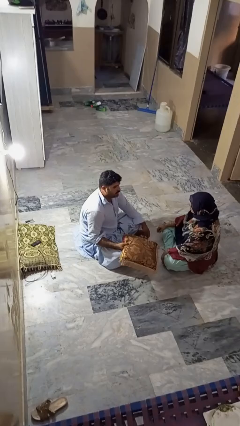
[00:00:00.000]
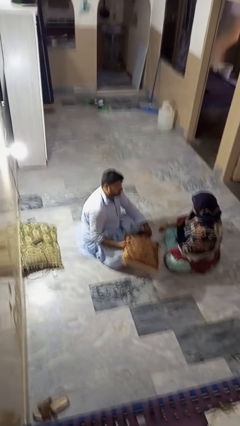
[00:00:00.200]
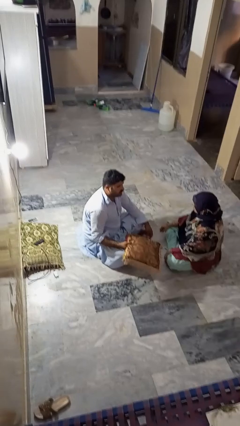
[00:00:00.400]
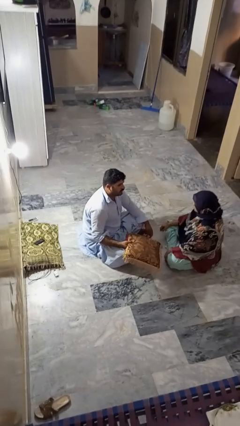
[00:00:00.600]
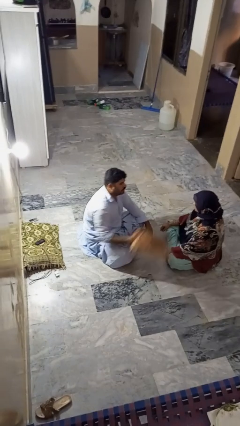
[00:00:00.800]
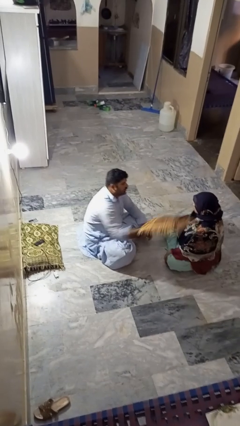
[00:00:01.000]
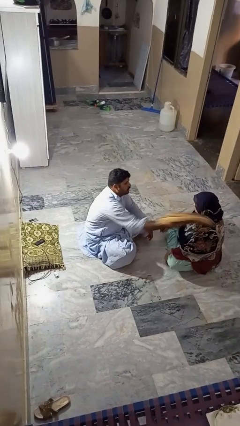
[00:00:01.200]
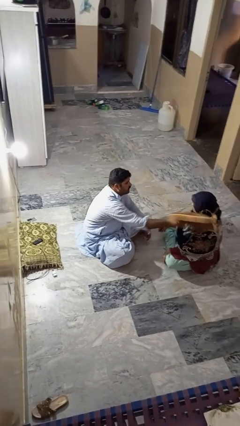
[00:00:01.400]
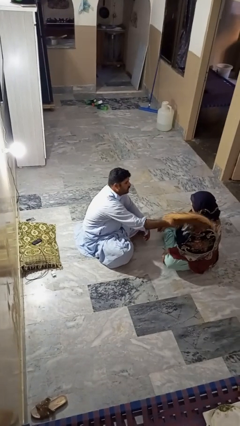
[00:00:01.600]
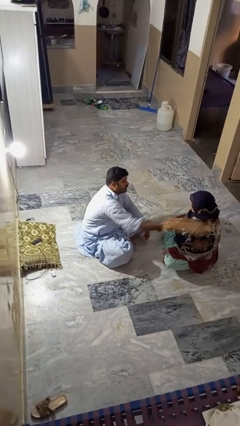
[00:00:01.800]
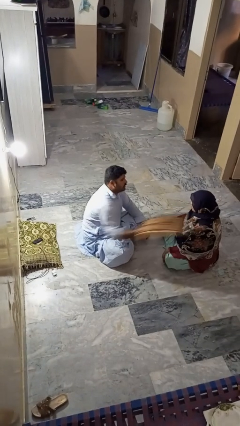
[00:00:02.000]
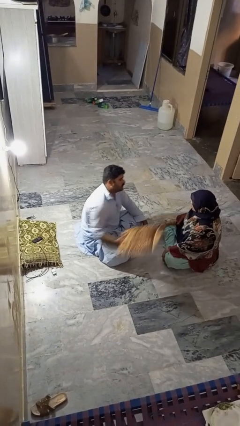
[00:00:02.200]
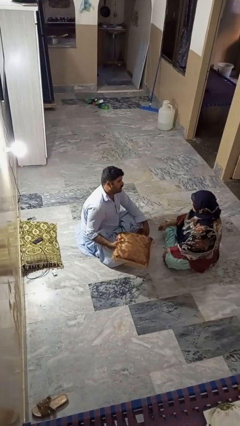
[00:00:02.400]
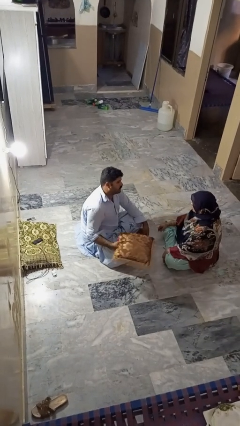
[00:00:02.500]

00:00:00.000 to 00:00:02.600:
person hits person with pillow

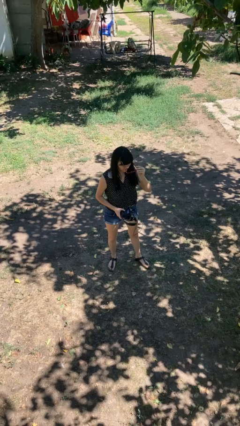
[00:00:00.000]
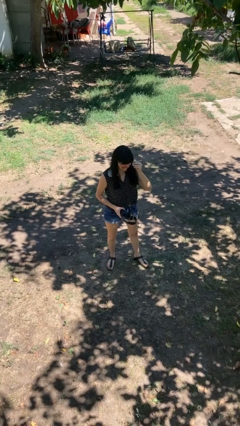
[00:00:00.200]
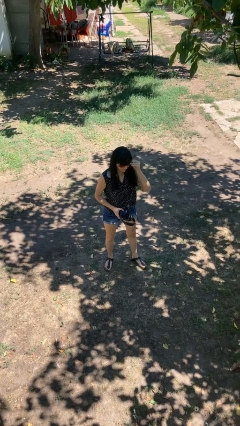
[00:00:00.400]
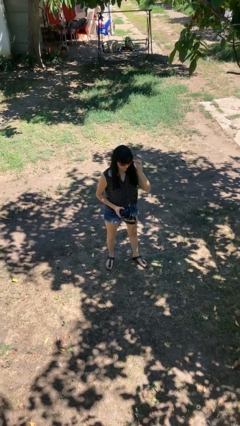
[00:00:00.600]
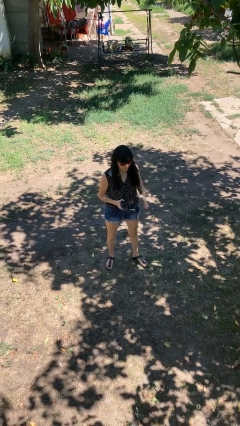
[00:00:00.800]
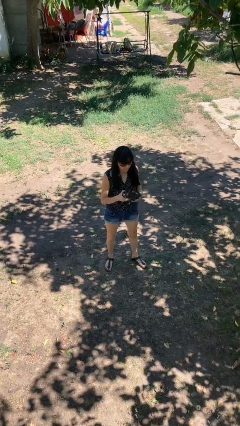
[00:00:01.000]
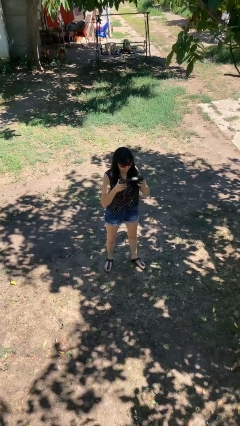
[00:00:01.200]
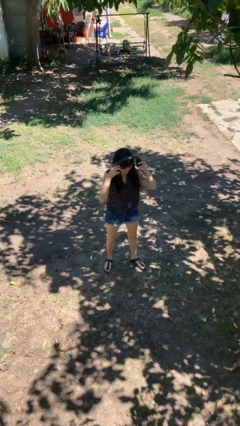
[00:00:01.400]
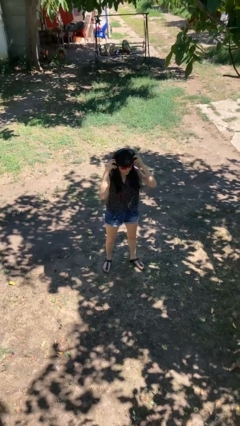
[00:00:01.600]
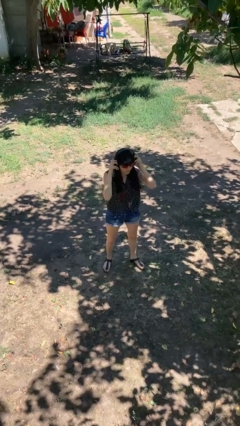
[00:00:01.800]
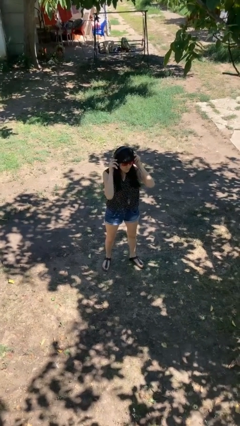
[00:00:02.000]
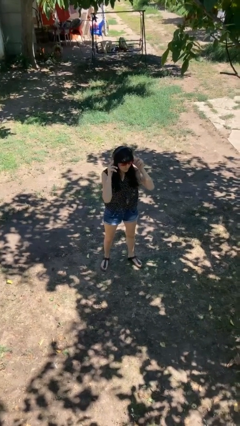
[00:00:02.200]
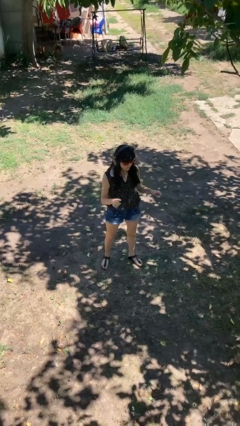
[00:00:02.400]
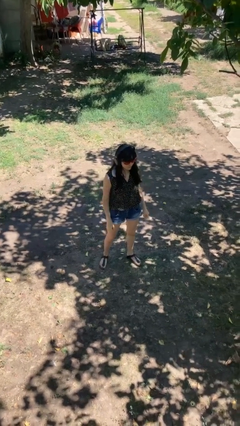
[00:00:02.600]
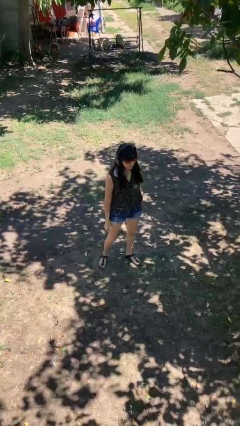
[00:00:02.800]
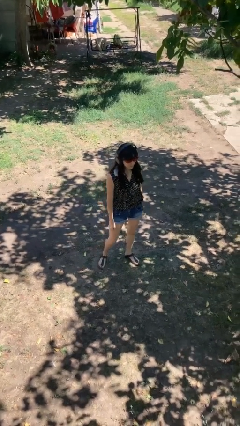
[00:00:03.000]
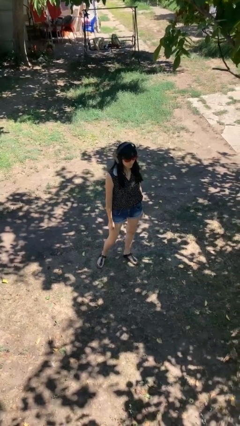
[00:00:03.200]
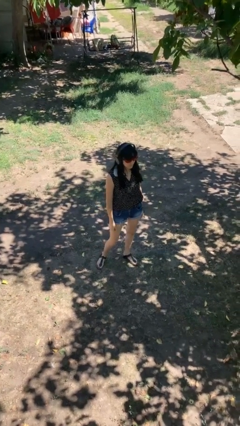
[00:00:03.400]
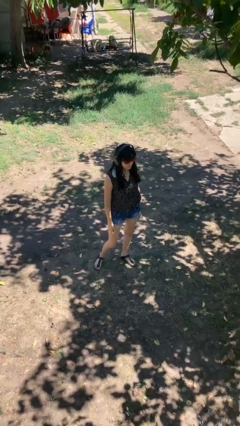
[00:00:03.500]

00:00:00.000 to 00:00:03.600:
person puts on headphones

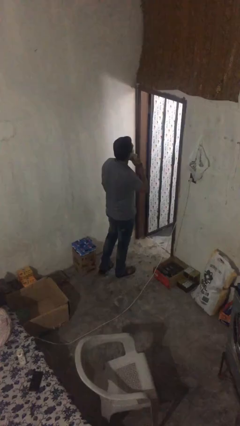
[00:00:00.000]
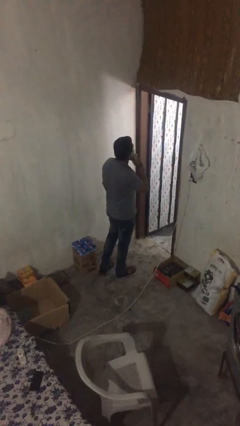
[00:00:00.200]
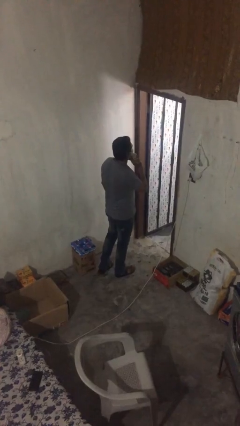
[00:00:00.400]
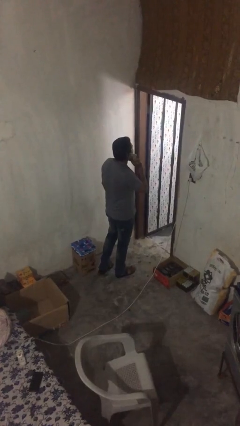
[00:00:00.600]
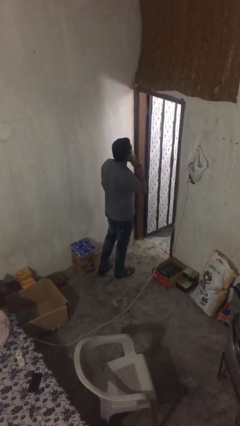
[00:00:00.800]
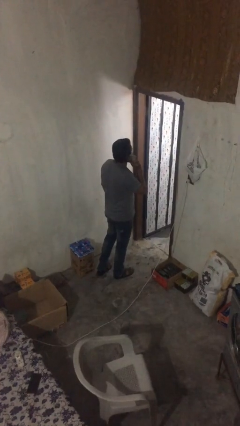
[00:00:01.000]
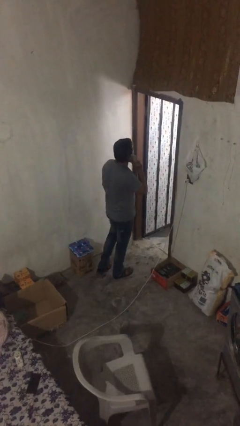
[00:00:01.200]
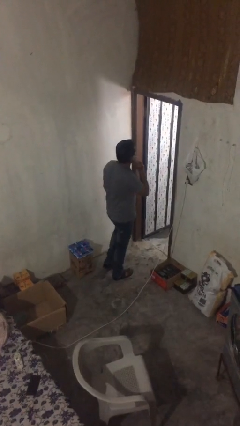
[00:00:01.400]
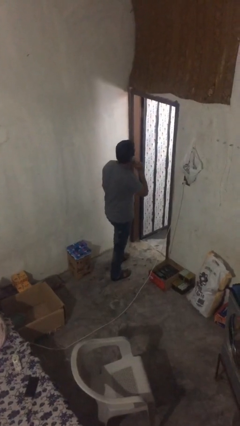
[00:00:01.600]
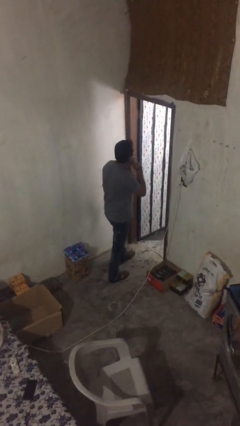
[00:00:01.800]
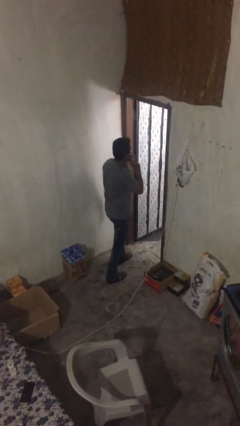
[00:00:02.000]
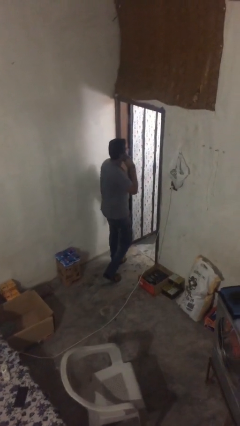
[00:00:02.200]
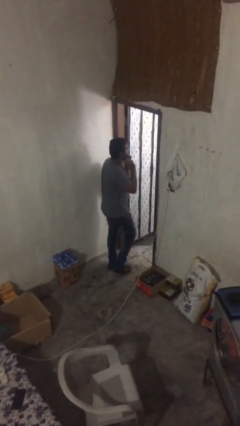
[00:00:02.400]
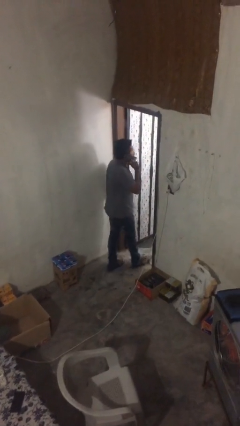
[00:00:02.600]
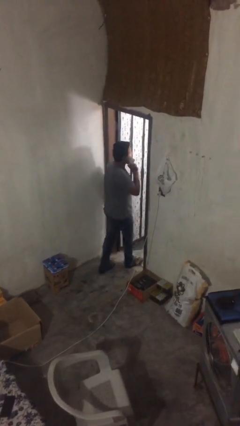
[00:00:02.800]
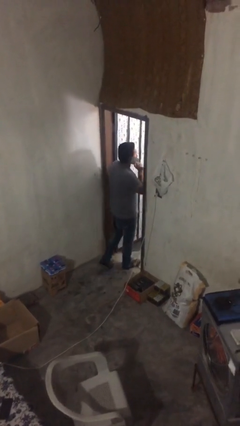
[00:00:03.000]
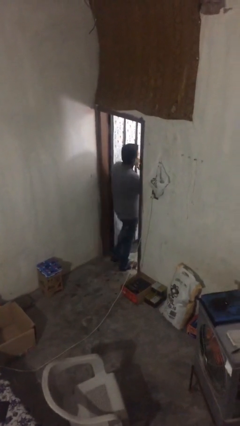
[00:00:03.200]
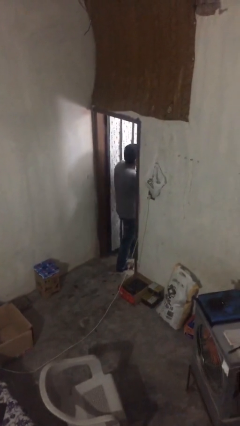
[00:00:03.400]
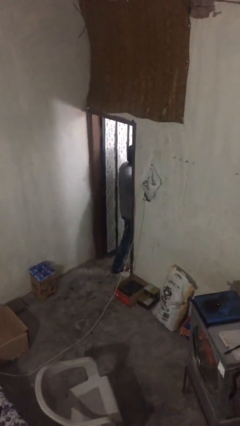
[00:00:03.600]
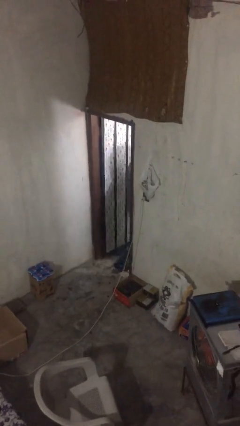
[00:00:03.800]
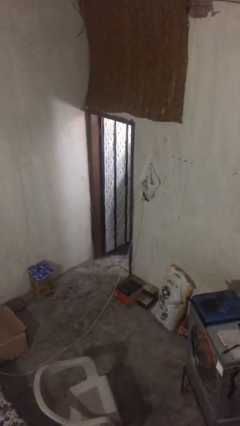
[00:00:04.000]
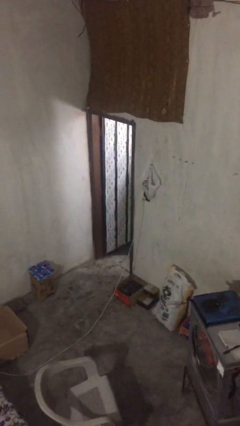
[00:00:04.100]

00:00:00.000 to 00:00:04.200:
person exits scene through structure

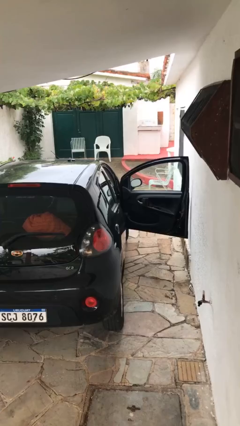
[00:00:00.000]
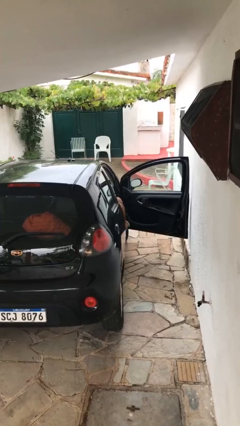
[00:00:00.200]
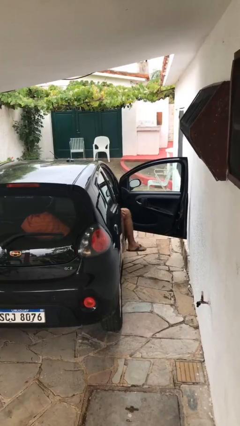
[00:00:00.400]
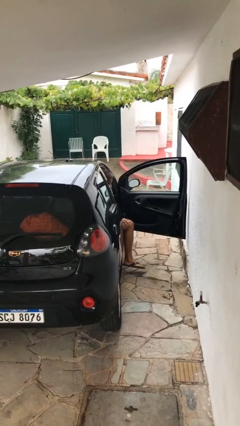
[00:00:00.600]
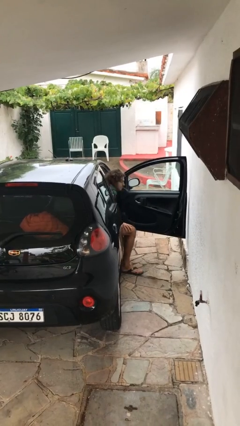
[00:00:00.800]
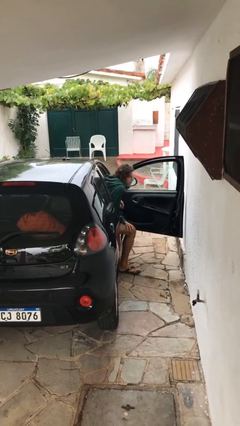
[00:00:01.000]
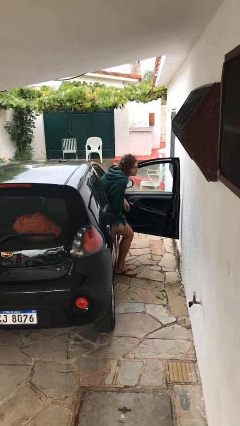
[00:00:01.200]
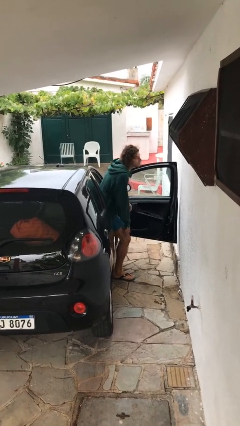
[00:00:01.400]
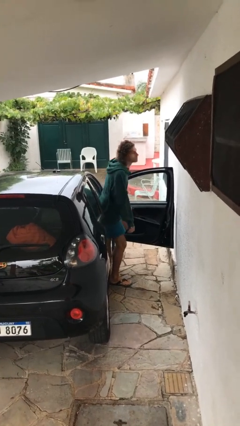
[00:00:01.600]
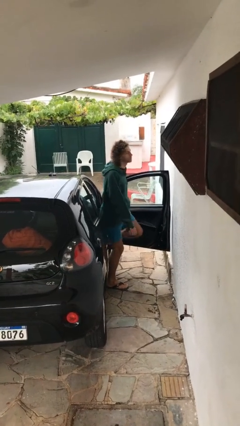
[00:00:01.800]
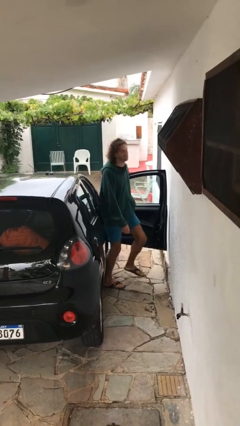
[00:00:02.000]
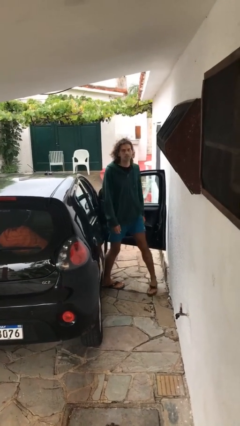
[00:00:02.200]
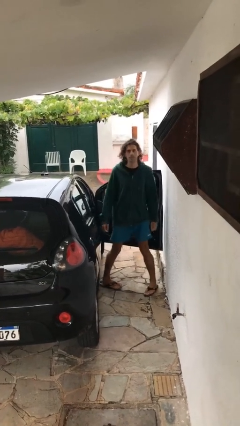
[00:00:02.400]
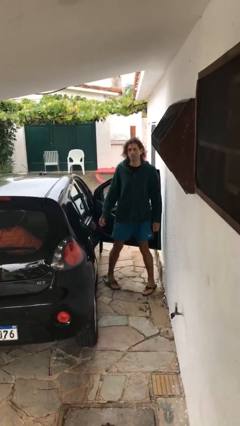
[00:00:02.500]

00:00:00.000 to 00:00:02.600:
person exits car

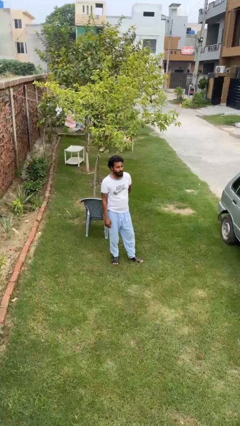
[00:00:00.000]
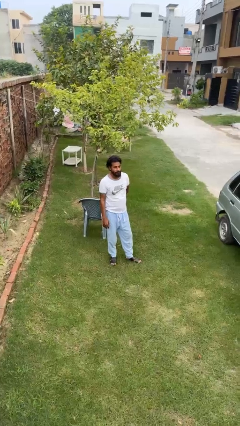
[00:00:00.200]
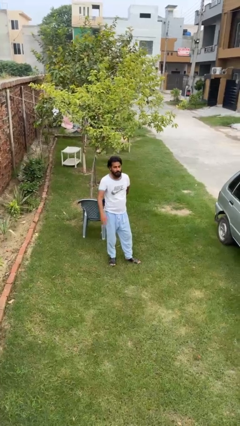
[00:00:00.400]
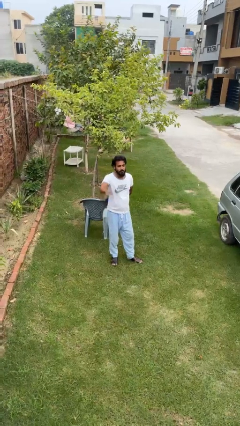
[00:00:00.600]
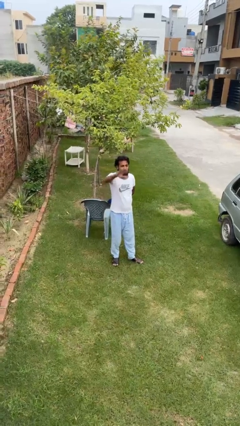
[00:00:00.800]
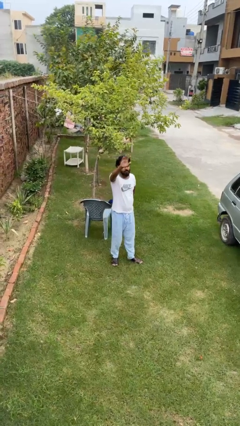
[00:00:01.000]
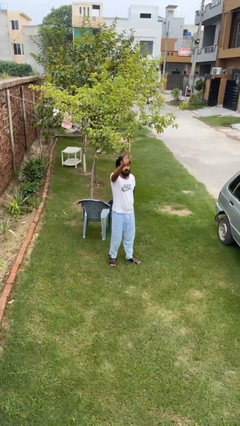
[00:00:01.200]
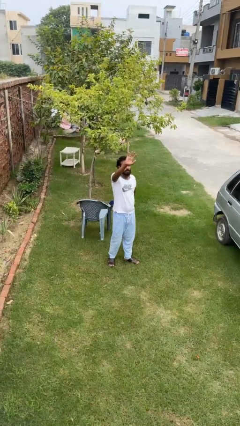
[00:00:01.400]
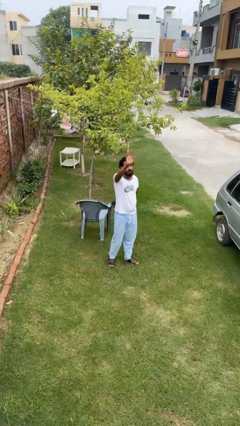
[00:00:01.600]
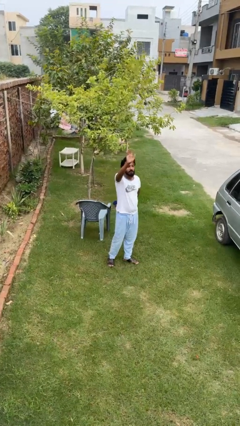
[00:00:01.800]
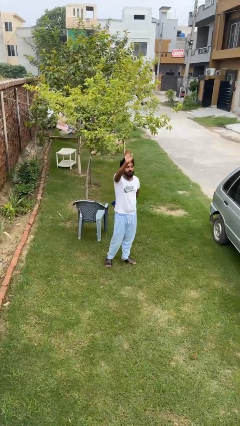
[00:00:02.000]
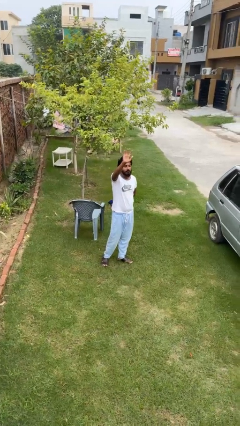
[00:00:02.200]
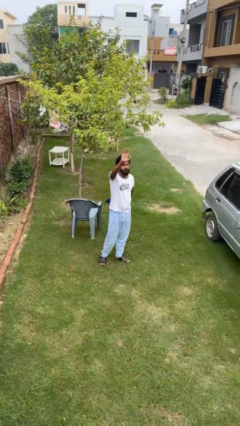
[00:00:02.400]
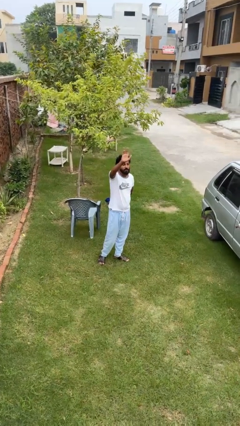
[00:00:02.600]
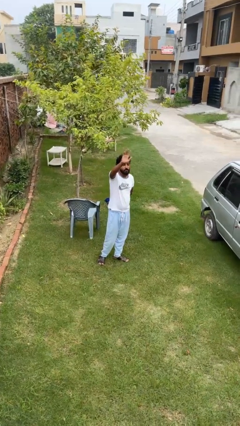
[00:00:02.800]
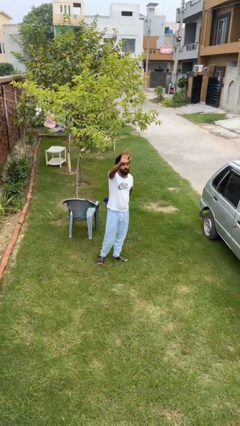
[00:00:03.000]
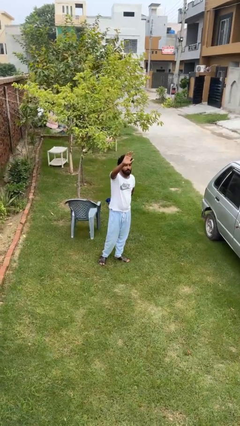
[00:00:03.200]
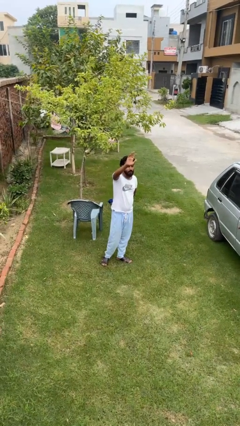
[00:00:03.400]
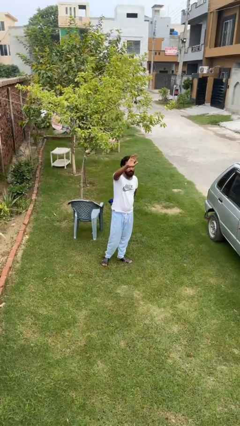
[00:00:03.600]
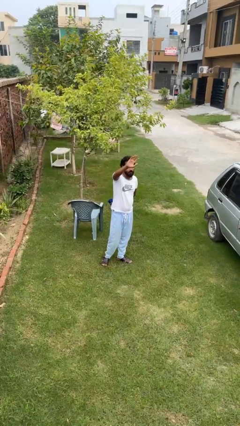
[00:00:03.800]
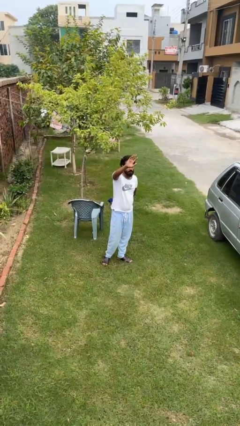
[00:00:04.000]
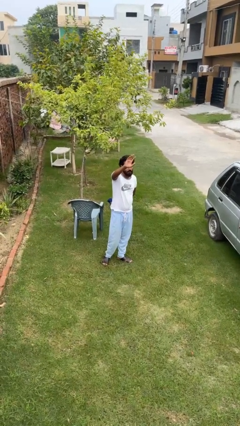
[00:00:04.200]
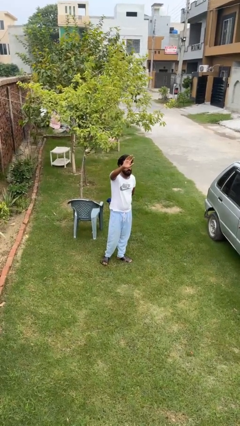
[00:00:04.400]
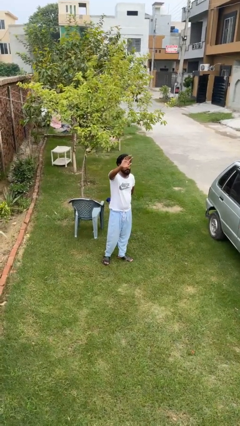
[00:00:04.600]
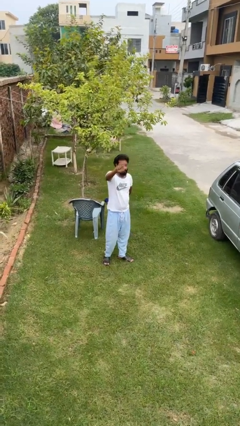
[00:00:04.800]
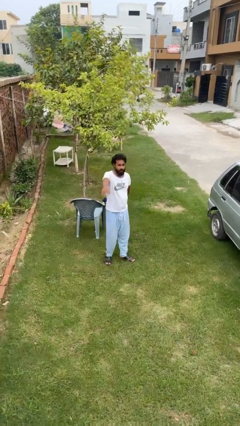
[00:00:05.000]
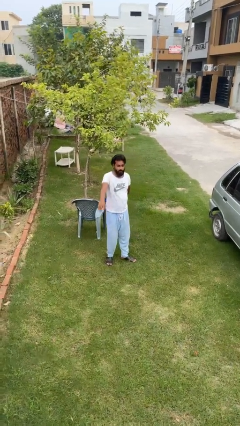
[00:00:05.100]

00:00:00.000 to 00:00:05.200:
person waves at person
